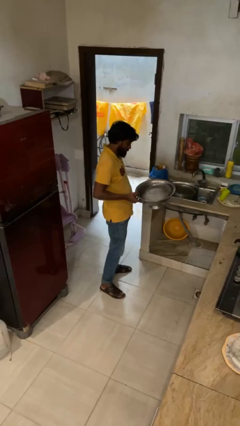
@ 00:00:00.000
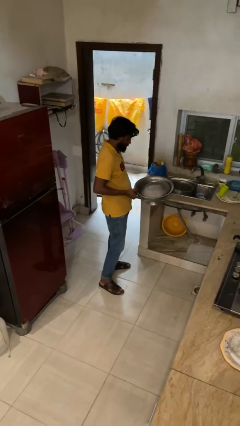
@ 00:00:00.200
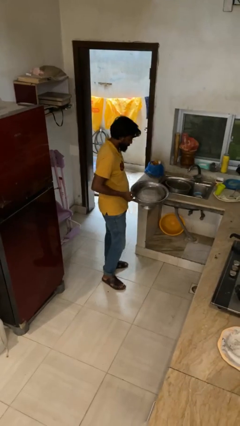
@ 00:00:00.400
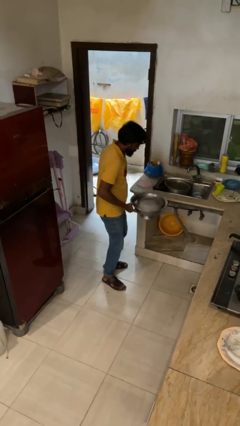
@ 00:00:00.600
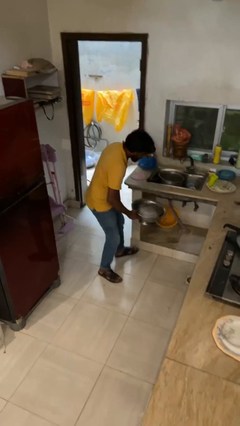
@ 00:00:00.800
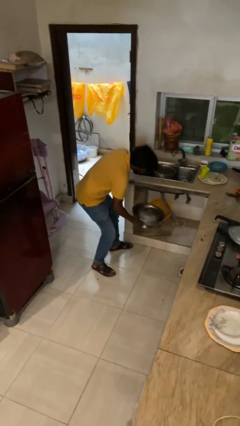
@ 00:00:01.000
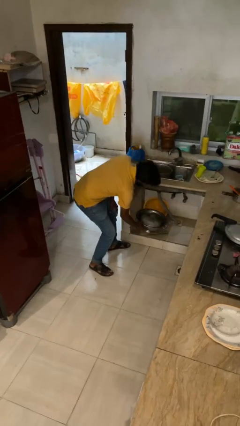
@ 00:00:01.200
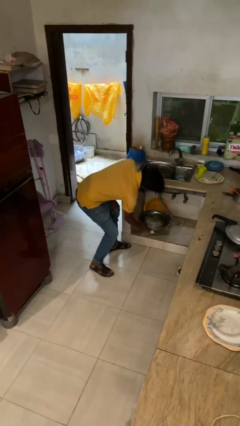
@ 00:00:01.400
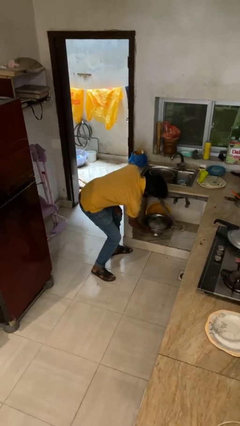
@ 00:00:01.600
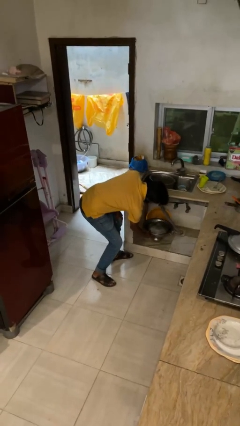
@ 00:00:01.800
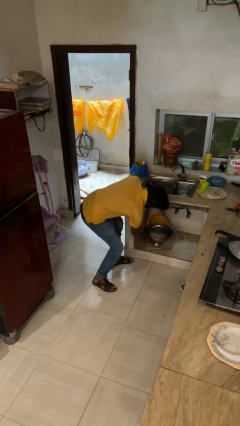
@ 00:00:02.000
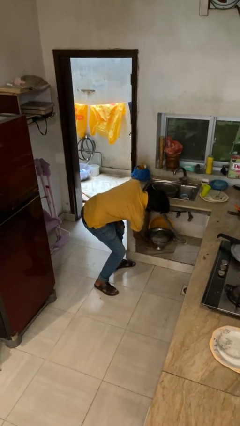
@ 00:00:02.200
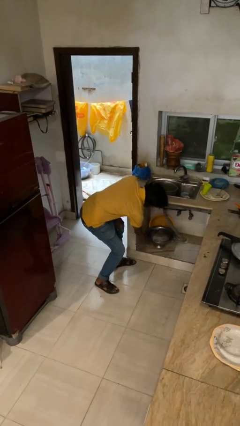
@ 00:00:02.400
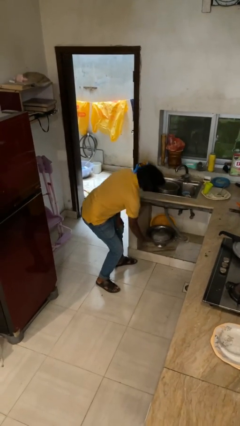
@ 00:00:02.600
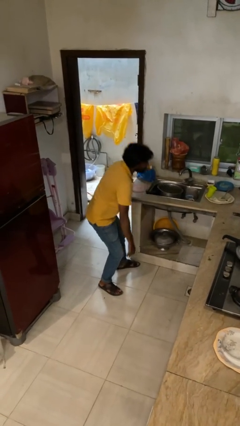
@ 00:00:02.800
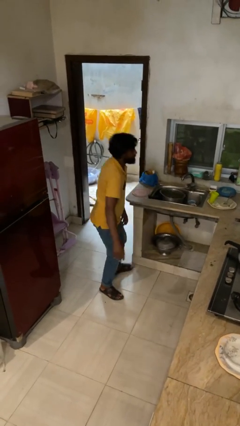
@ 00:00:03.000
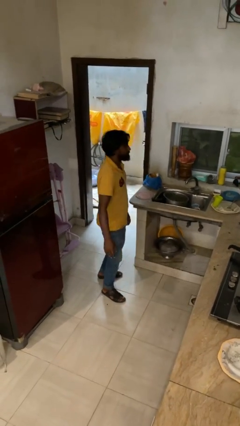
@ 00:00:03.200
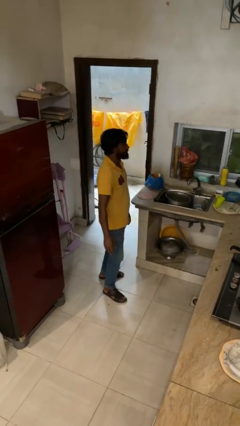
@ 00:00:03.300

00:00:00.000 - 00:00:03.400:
person puts down object into cabinet

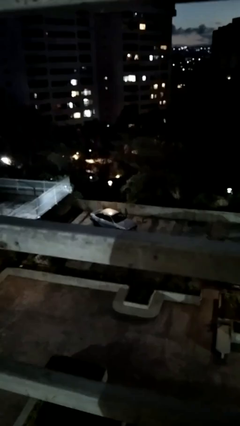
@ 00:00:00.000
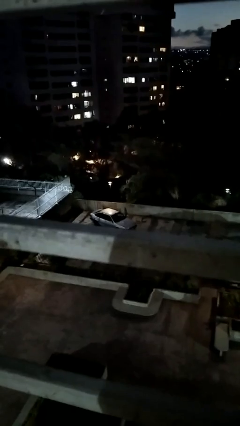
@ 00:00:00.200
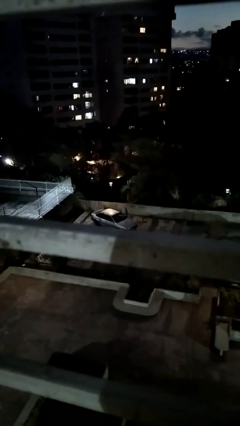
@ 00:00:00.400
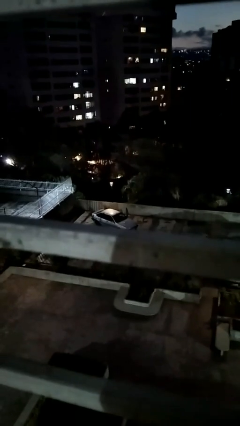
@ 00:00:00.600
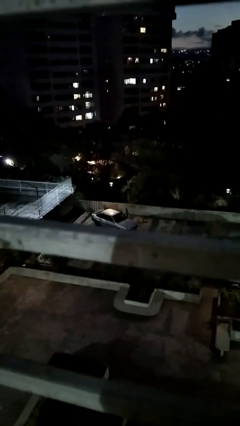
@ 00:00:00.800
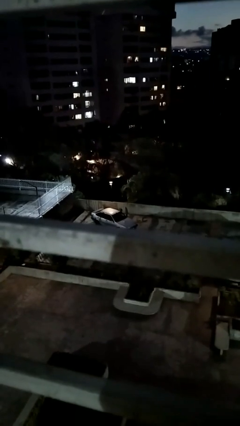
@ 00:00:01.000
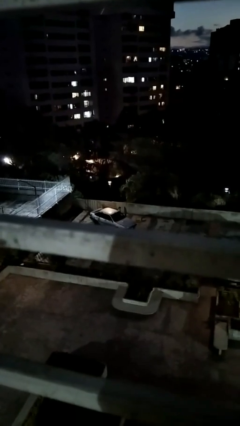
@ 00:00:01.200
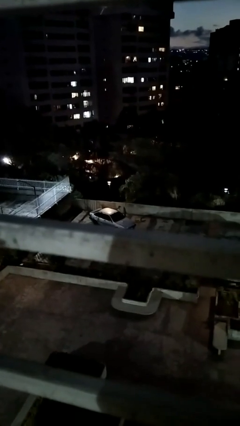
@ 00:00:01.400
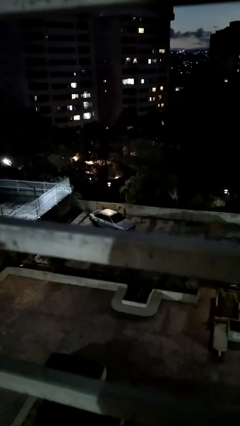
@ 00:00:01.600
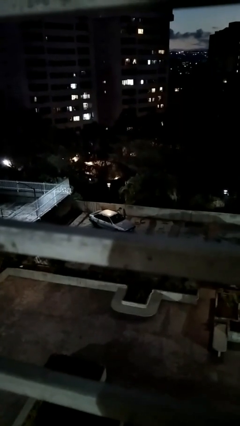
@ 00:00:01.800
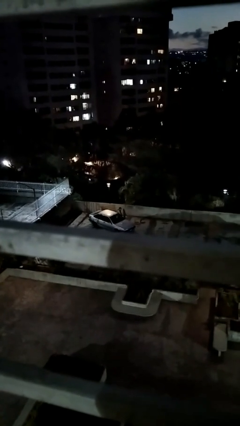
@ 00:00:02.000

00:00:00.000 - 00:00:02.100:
person exits car

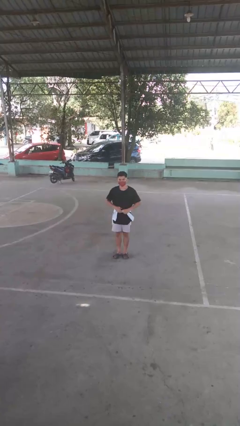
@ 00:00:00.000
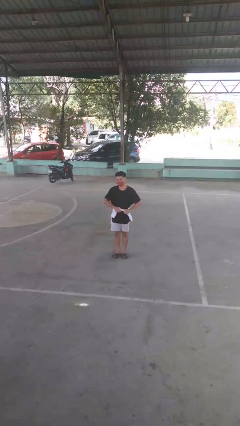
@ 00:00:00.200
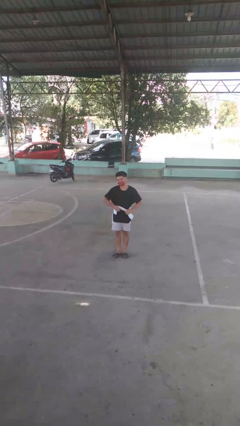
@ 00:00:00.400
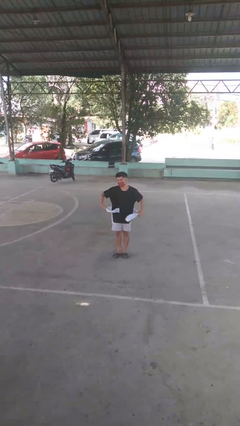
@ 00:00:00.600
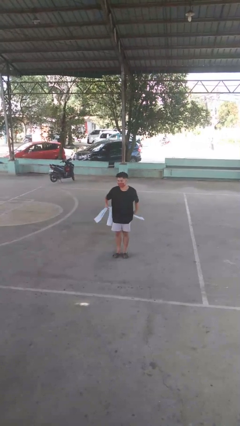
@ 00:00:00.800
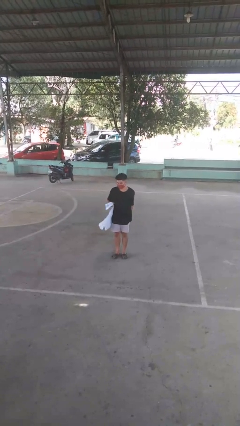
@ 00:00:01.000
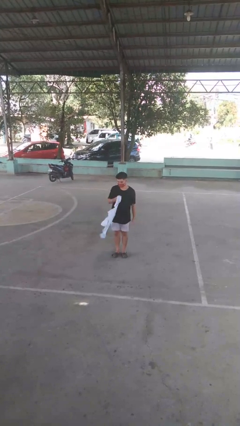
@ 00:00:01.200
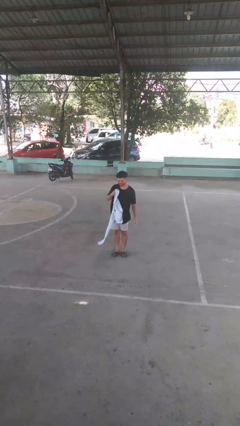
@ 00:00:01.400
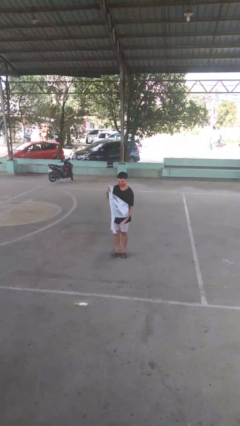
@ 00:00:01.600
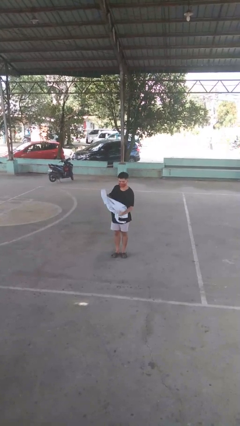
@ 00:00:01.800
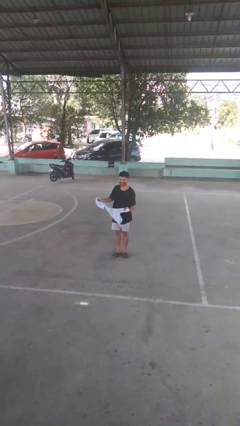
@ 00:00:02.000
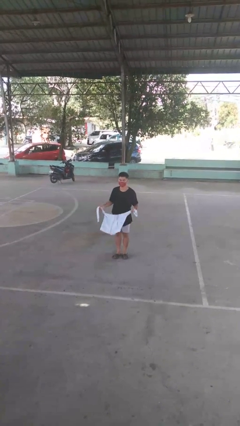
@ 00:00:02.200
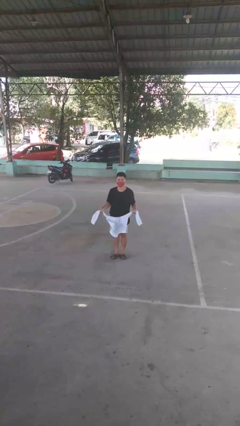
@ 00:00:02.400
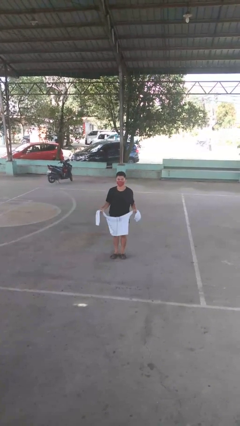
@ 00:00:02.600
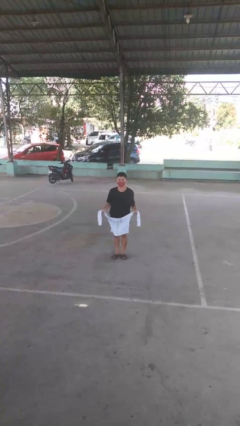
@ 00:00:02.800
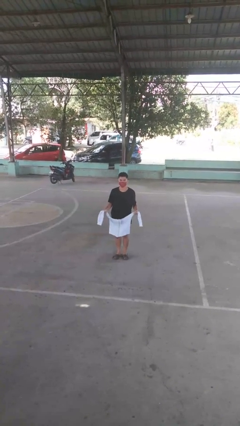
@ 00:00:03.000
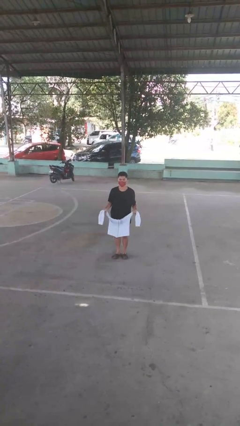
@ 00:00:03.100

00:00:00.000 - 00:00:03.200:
person unties jacket around waist

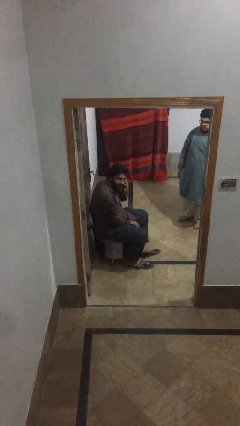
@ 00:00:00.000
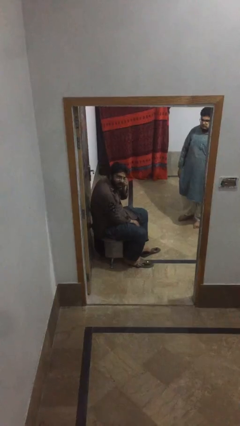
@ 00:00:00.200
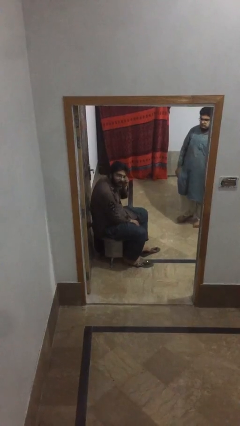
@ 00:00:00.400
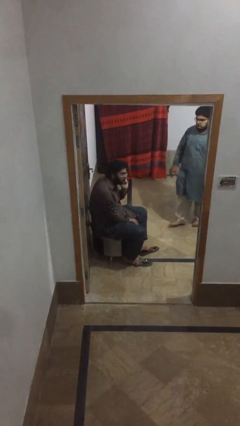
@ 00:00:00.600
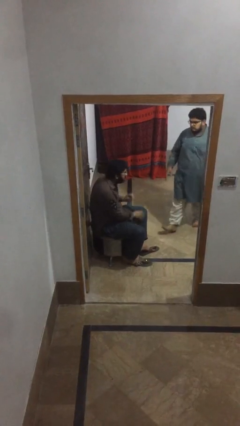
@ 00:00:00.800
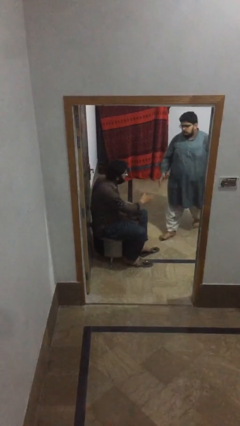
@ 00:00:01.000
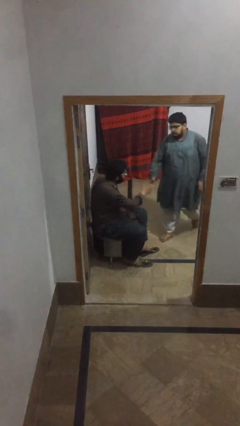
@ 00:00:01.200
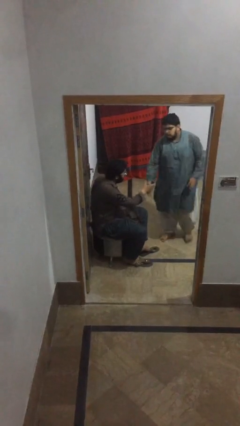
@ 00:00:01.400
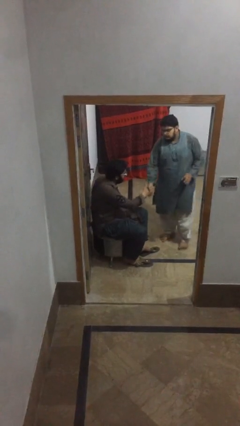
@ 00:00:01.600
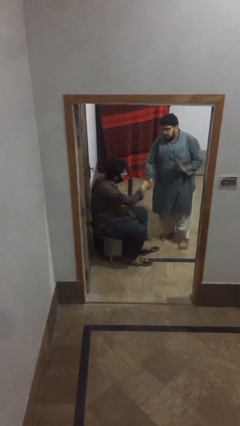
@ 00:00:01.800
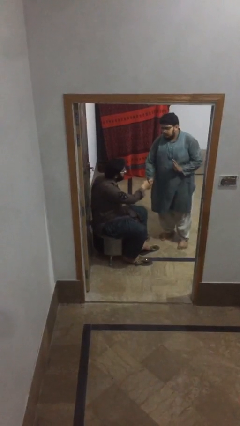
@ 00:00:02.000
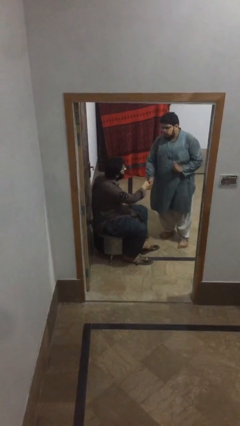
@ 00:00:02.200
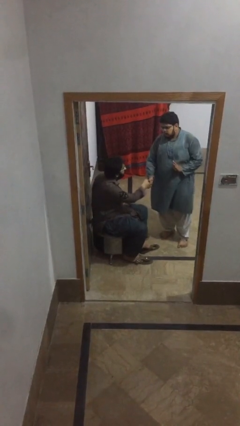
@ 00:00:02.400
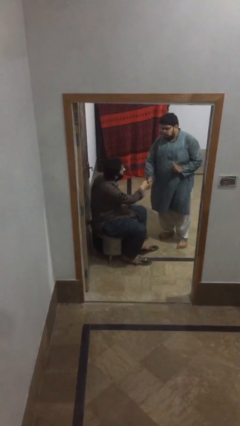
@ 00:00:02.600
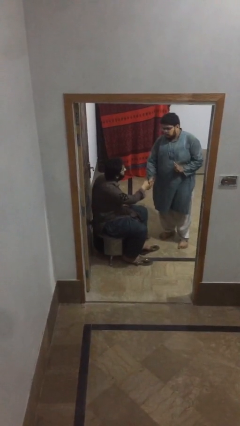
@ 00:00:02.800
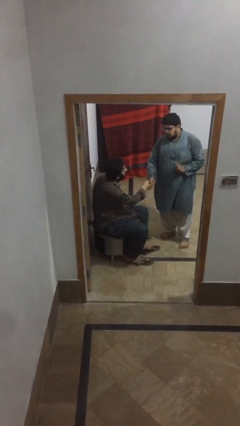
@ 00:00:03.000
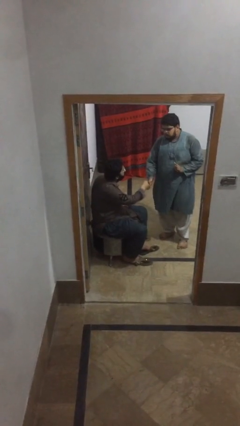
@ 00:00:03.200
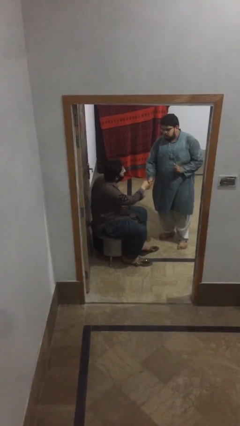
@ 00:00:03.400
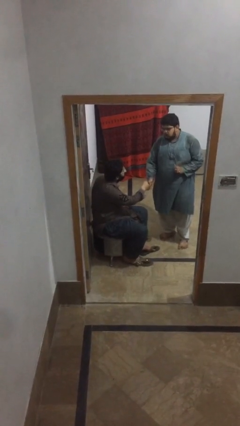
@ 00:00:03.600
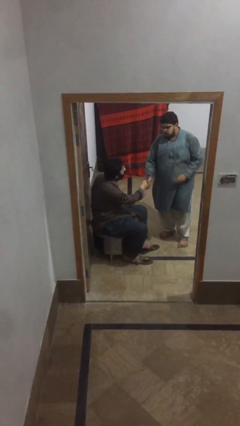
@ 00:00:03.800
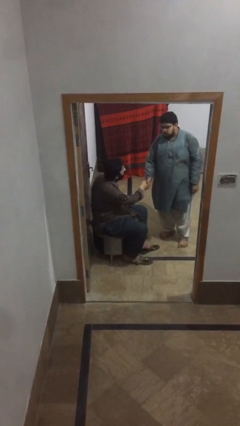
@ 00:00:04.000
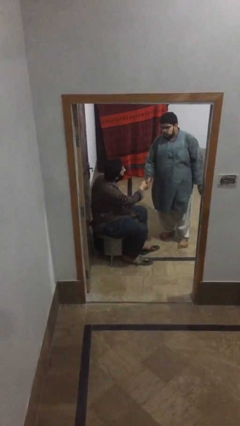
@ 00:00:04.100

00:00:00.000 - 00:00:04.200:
person shakes hand

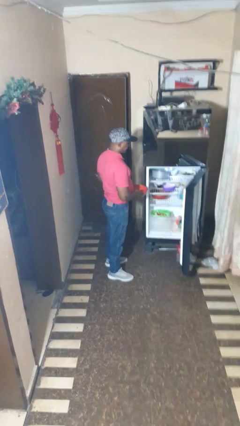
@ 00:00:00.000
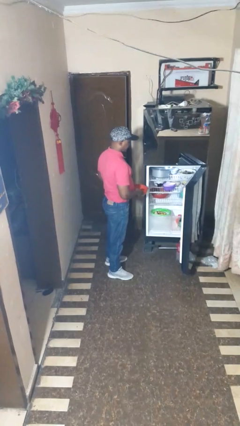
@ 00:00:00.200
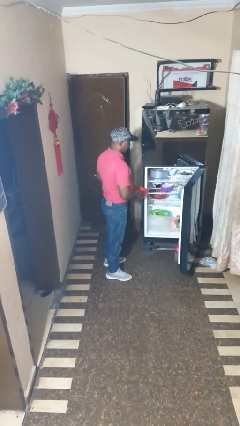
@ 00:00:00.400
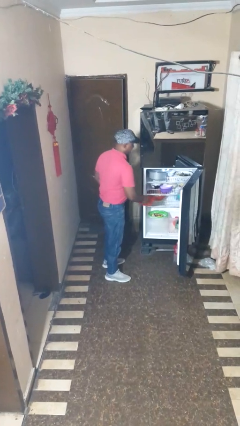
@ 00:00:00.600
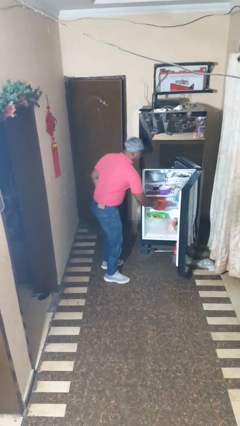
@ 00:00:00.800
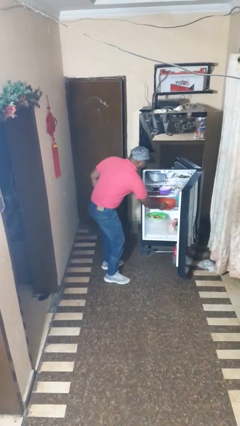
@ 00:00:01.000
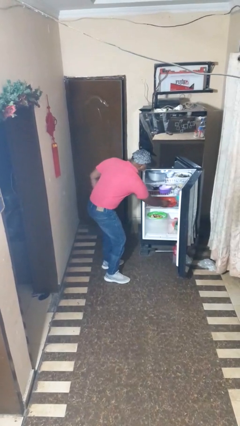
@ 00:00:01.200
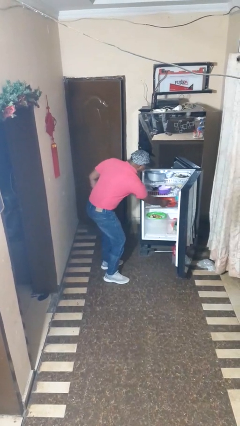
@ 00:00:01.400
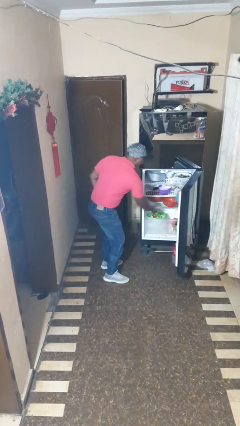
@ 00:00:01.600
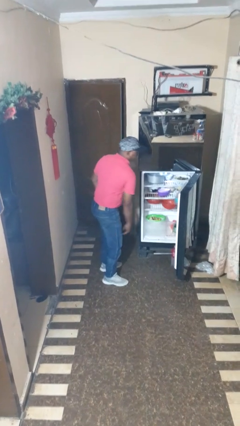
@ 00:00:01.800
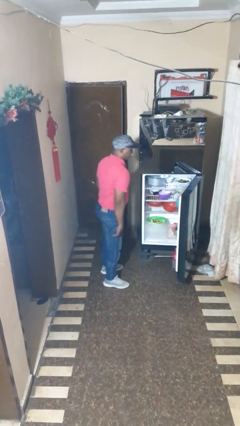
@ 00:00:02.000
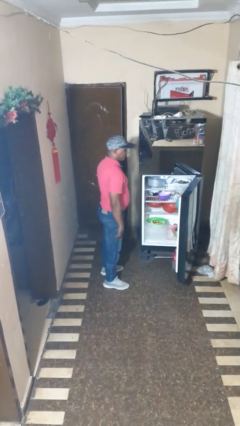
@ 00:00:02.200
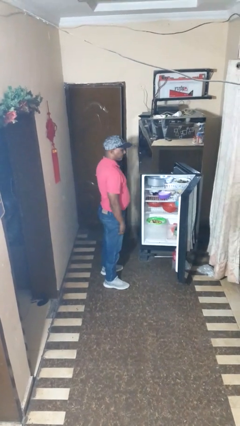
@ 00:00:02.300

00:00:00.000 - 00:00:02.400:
person puts object into refrigerator

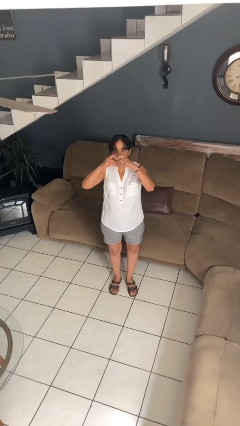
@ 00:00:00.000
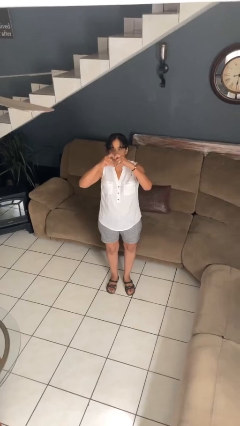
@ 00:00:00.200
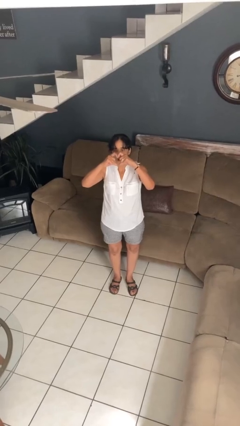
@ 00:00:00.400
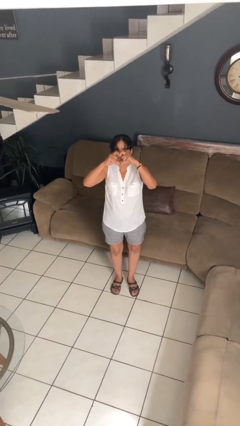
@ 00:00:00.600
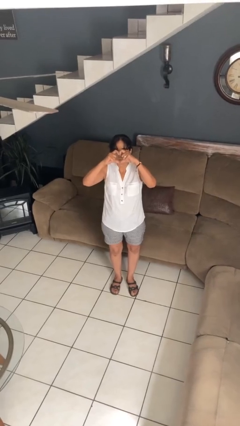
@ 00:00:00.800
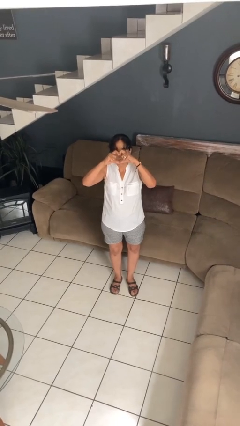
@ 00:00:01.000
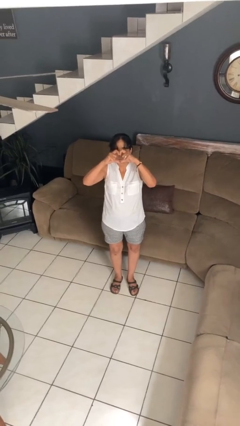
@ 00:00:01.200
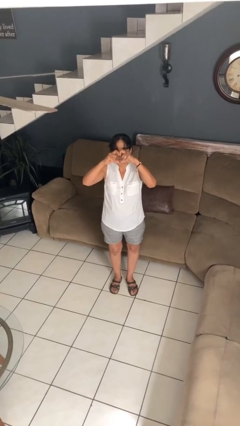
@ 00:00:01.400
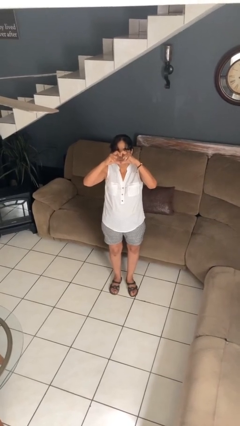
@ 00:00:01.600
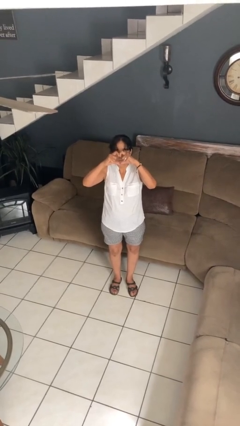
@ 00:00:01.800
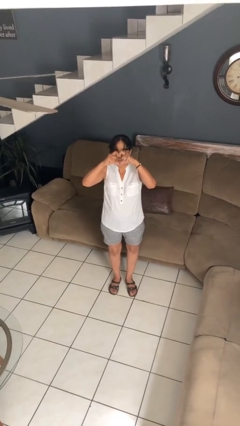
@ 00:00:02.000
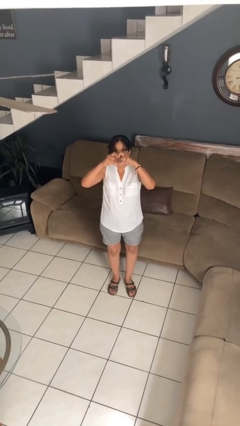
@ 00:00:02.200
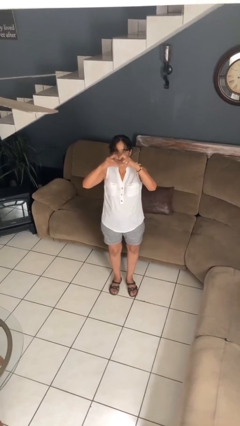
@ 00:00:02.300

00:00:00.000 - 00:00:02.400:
person gestures heart
